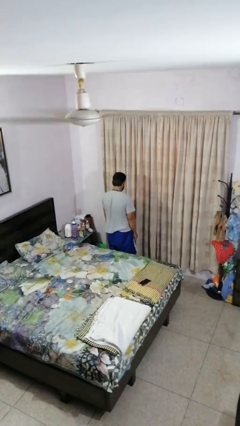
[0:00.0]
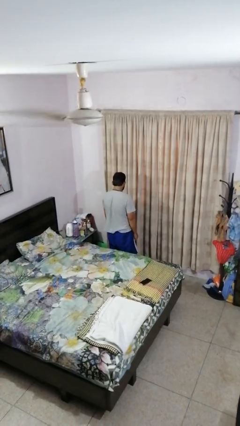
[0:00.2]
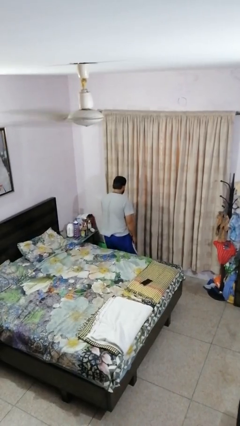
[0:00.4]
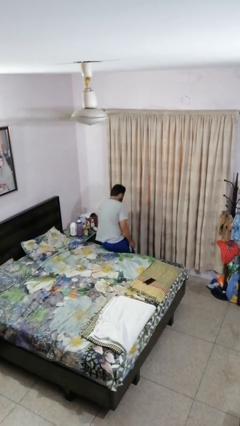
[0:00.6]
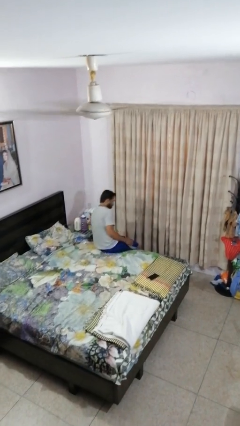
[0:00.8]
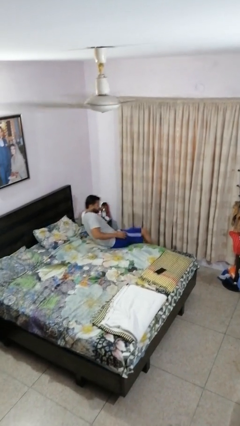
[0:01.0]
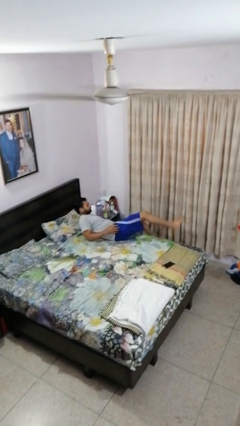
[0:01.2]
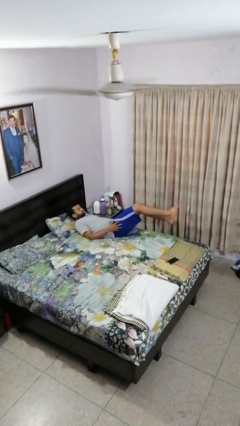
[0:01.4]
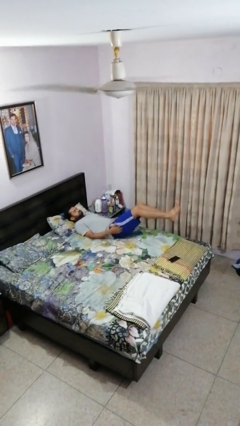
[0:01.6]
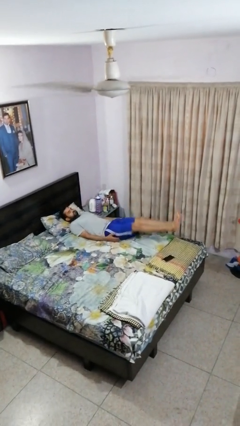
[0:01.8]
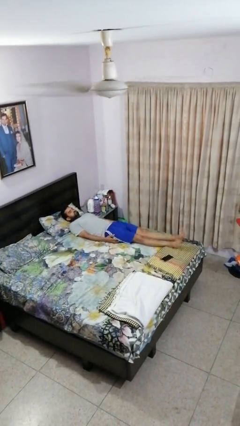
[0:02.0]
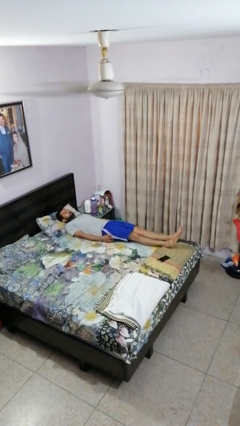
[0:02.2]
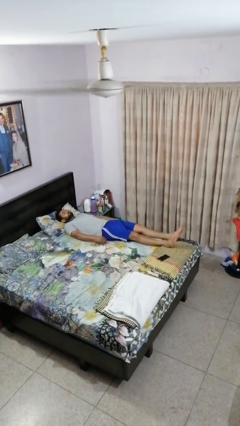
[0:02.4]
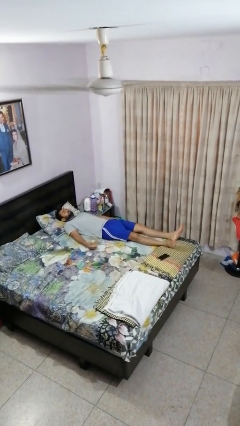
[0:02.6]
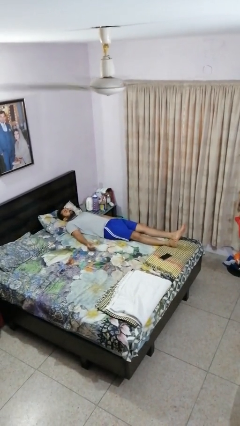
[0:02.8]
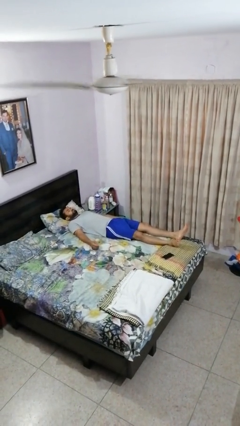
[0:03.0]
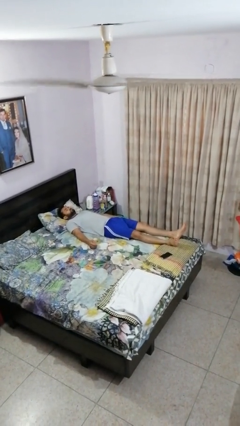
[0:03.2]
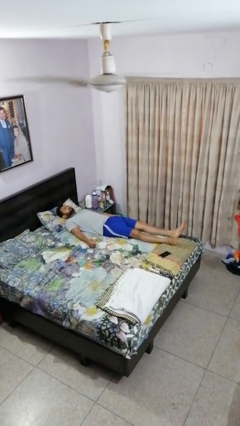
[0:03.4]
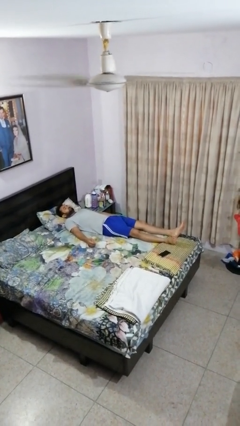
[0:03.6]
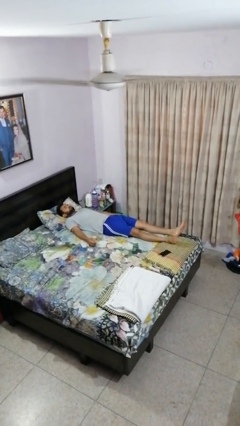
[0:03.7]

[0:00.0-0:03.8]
person lies down on bed

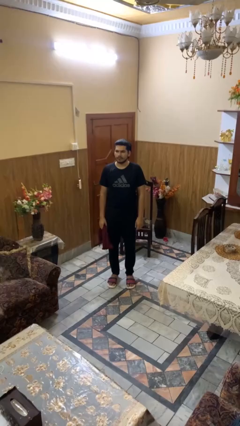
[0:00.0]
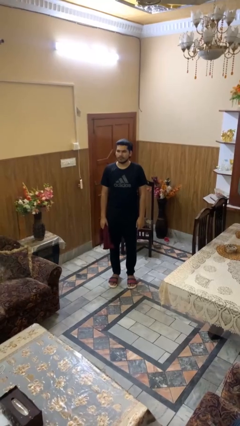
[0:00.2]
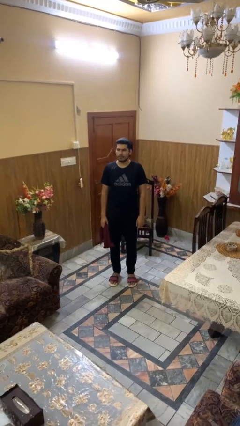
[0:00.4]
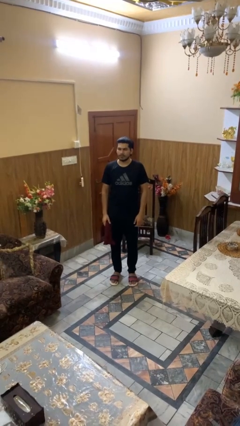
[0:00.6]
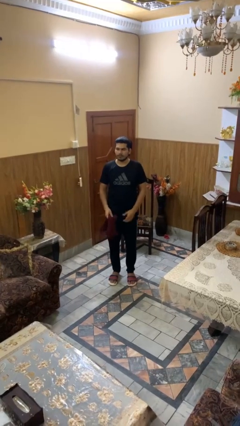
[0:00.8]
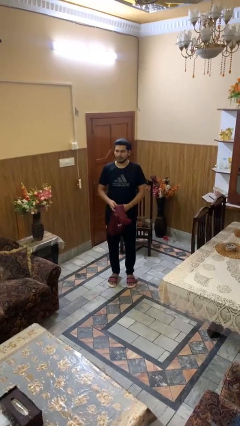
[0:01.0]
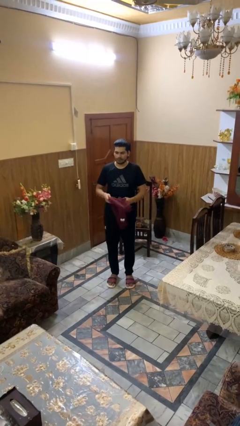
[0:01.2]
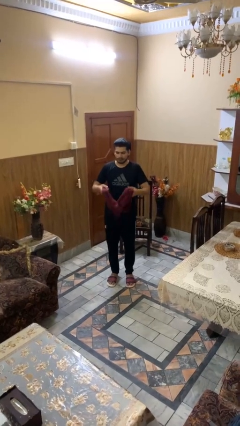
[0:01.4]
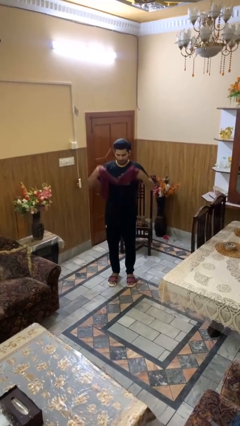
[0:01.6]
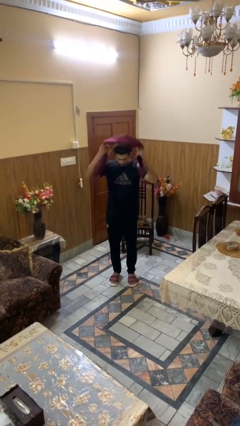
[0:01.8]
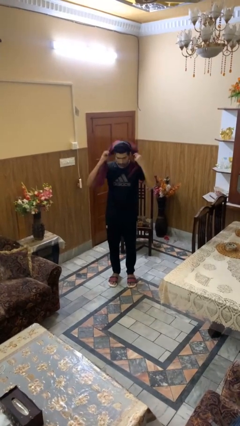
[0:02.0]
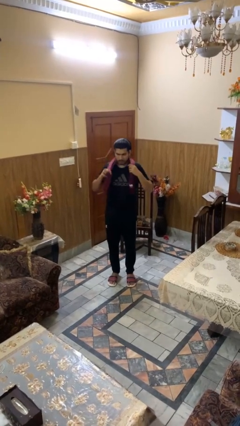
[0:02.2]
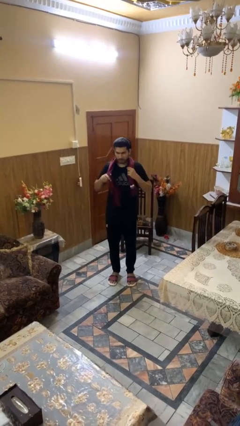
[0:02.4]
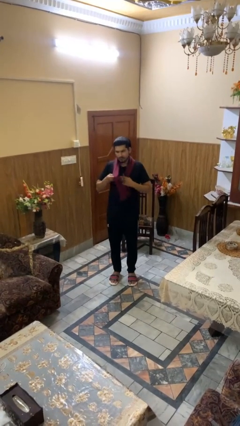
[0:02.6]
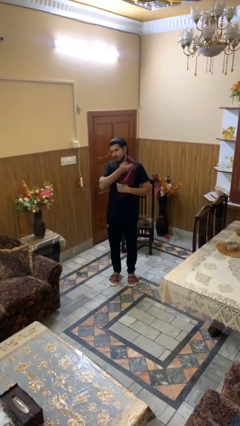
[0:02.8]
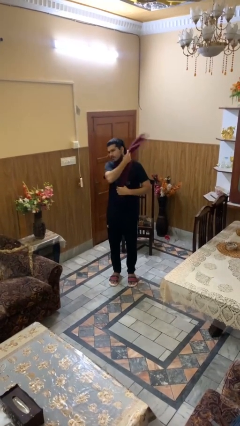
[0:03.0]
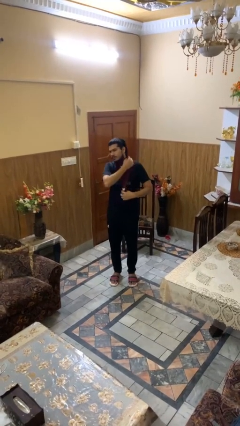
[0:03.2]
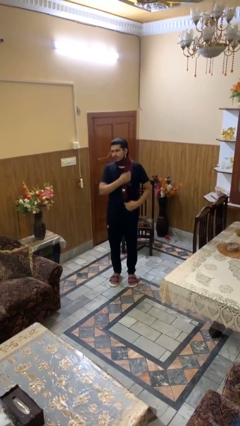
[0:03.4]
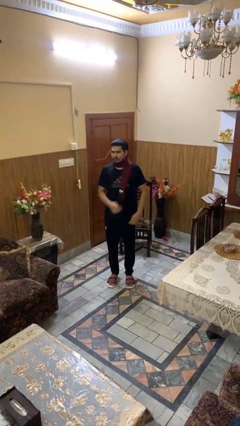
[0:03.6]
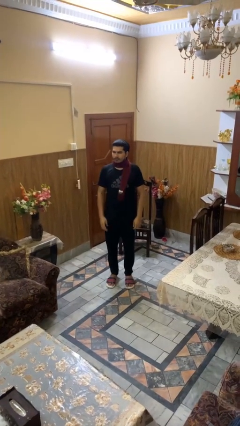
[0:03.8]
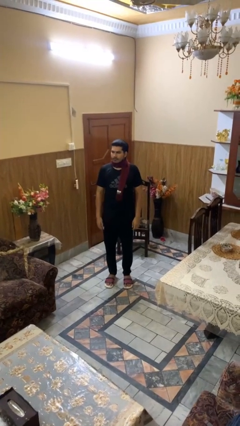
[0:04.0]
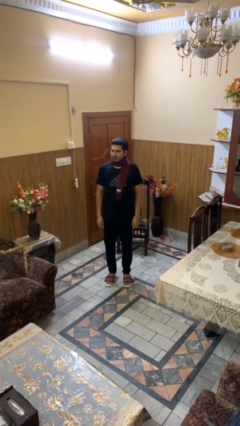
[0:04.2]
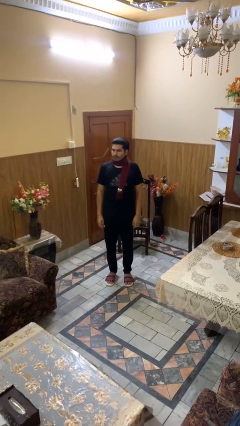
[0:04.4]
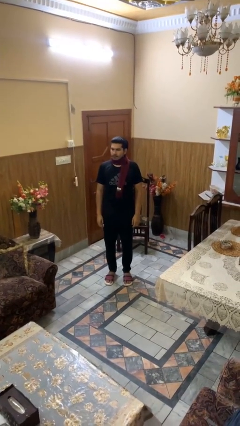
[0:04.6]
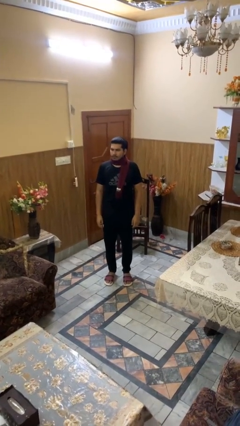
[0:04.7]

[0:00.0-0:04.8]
person puts on scarf

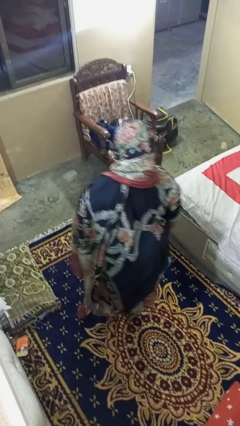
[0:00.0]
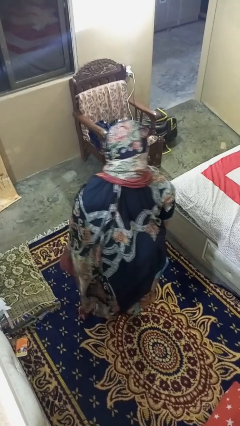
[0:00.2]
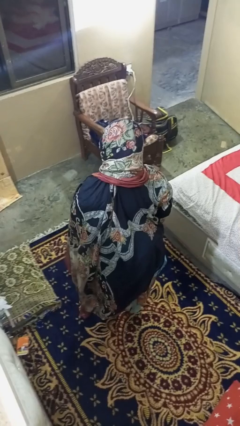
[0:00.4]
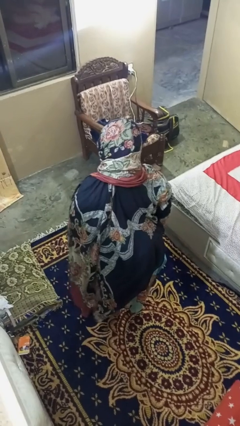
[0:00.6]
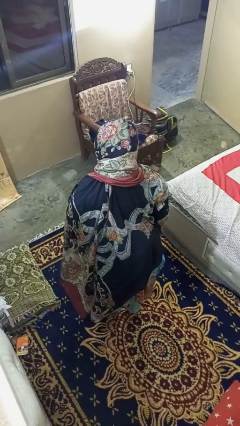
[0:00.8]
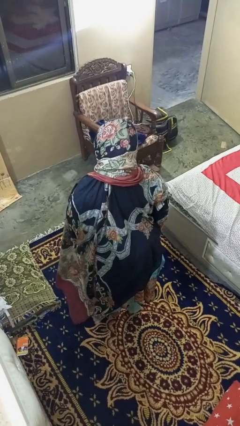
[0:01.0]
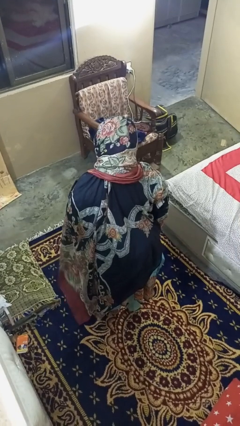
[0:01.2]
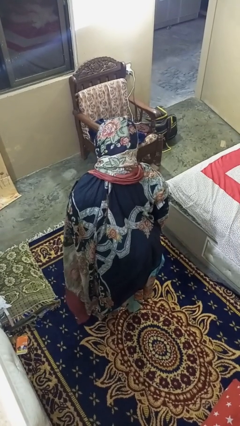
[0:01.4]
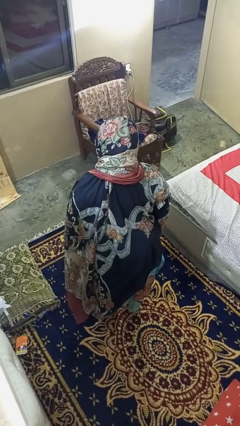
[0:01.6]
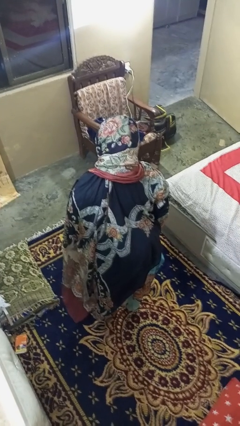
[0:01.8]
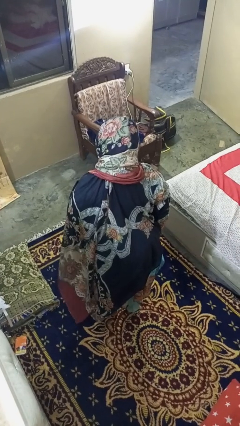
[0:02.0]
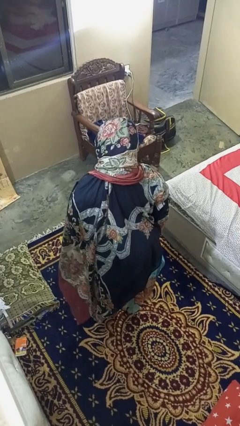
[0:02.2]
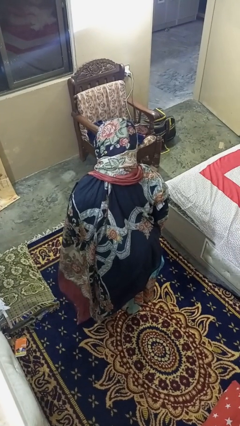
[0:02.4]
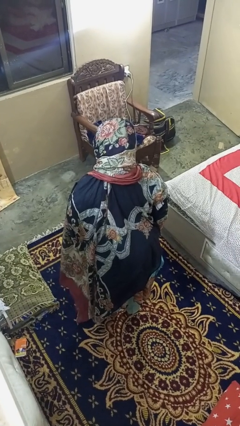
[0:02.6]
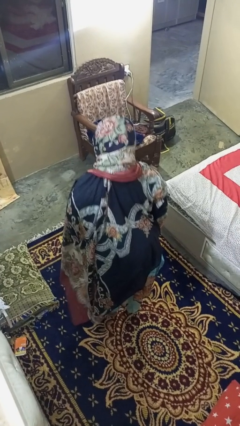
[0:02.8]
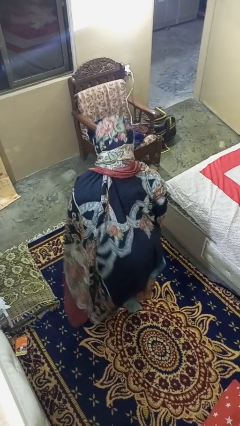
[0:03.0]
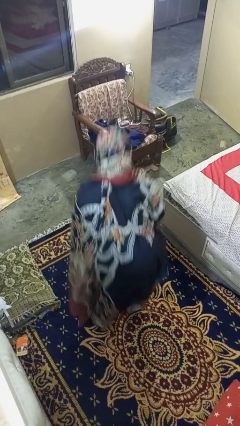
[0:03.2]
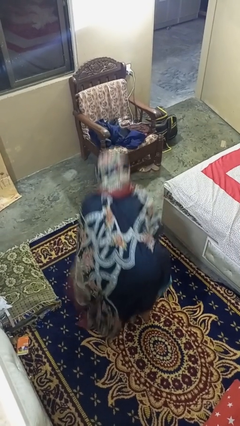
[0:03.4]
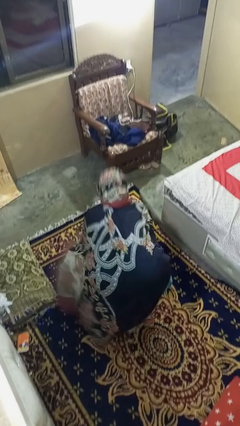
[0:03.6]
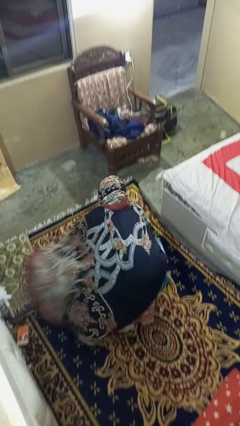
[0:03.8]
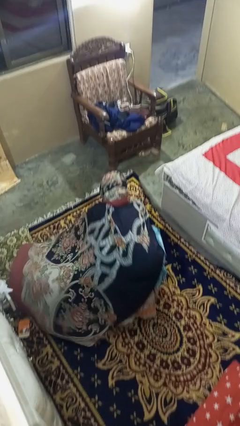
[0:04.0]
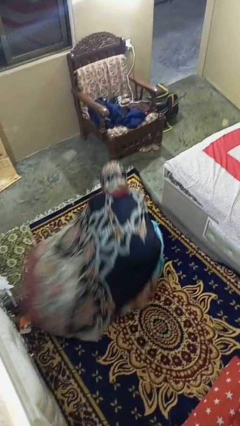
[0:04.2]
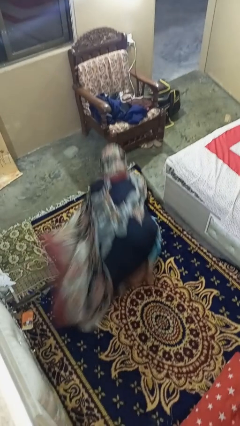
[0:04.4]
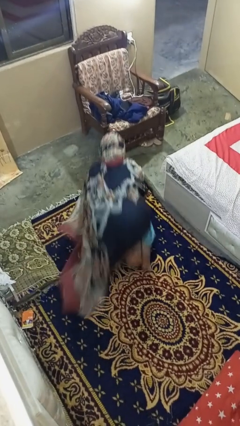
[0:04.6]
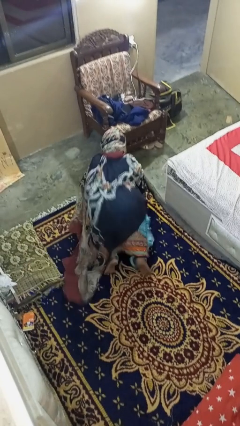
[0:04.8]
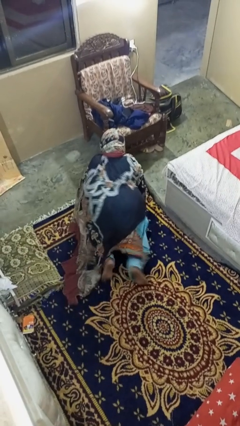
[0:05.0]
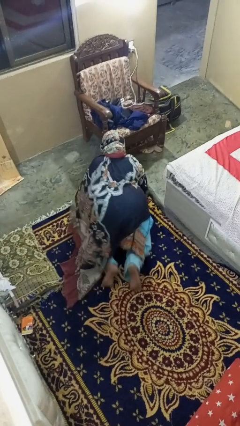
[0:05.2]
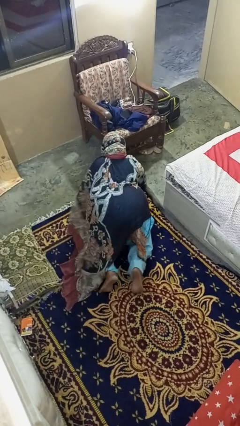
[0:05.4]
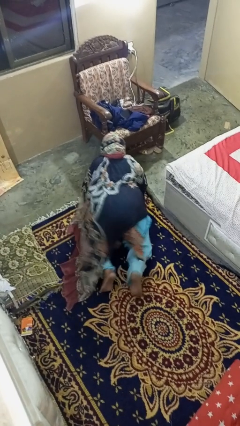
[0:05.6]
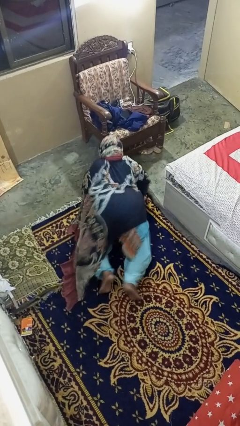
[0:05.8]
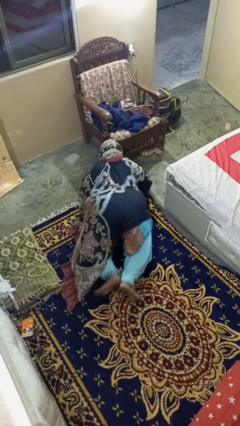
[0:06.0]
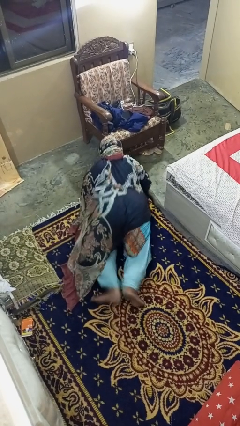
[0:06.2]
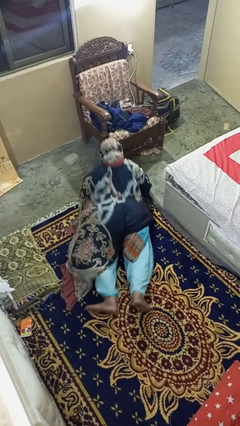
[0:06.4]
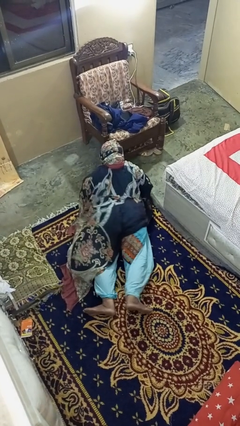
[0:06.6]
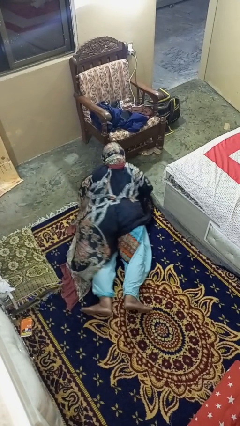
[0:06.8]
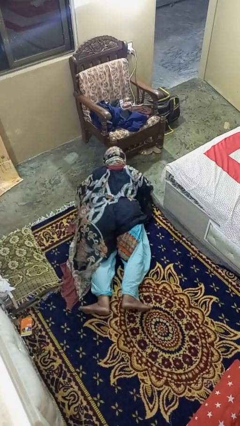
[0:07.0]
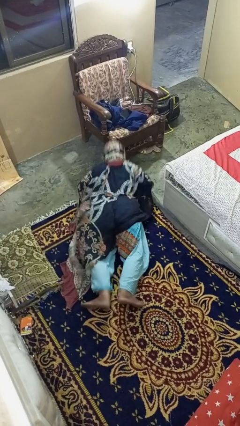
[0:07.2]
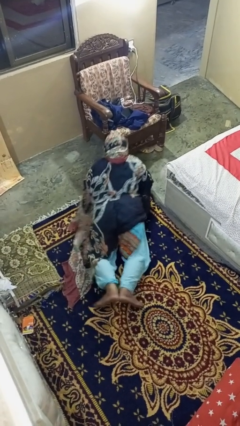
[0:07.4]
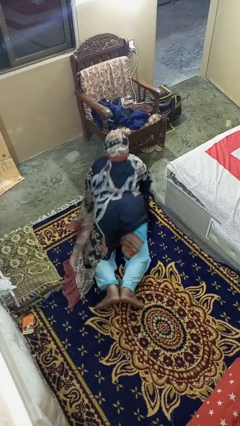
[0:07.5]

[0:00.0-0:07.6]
person exercises with pushup

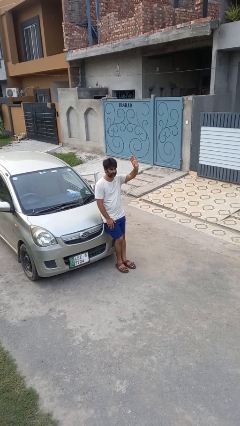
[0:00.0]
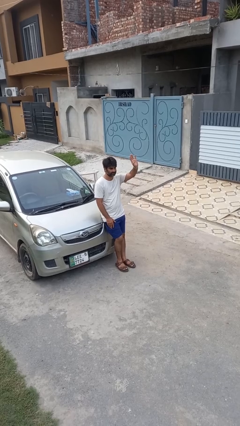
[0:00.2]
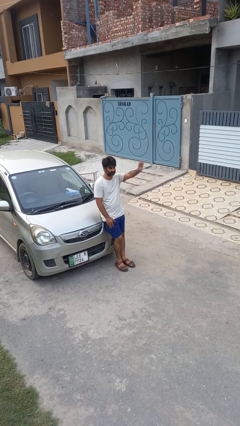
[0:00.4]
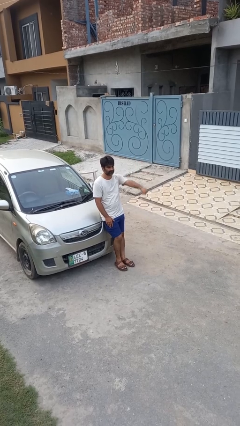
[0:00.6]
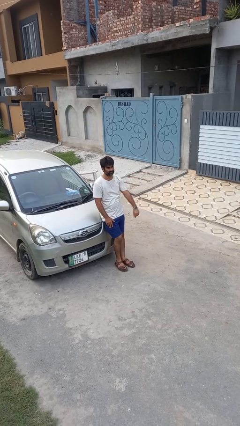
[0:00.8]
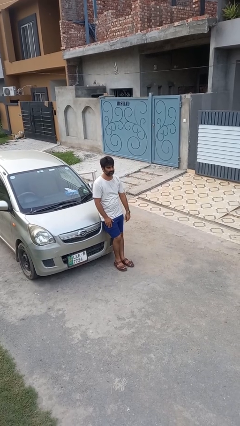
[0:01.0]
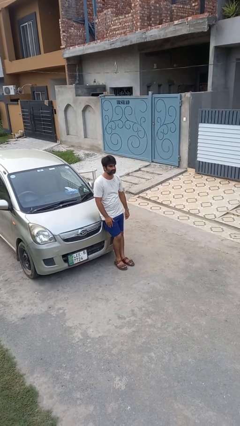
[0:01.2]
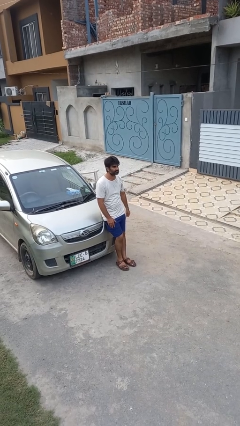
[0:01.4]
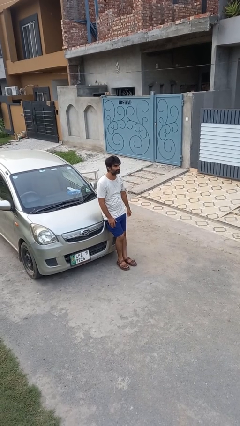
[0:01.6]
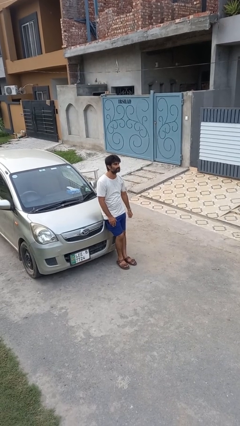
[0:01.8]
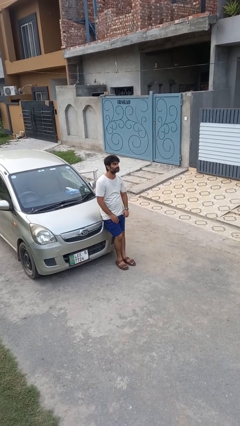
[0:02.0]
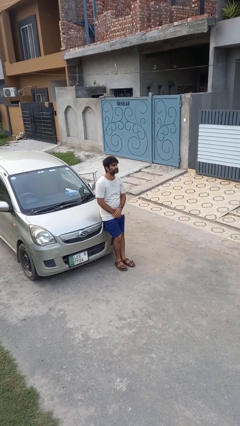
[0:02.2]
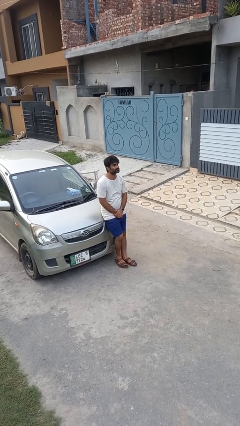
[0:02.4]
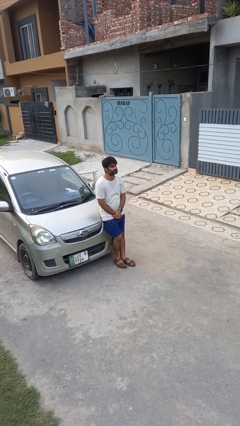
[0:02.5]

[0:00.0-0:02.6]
person gestures lower hand
